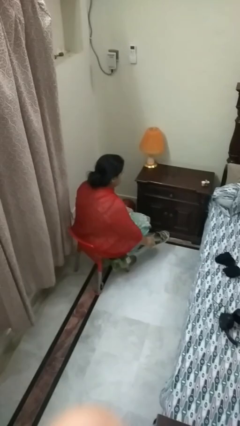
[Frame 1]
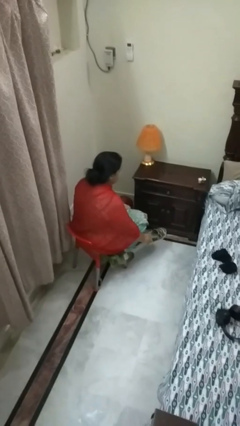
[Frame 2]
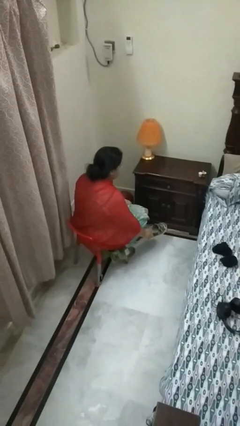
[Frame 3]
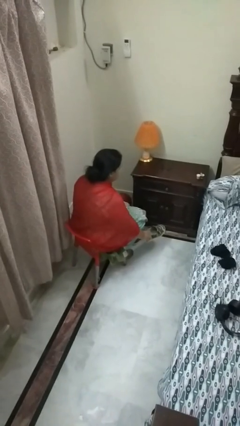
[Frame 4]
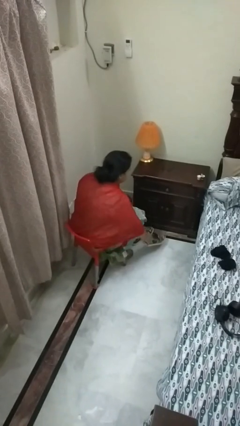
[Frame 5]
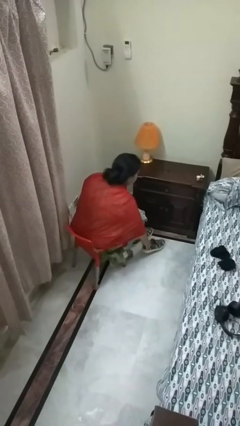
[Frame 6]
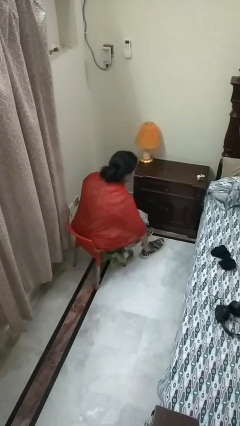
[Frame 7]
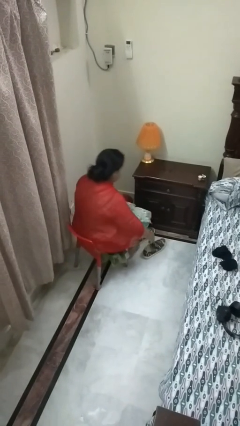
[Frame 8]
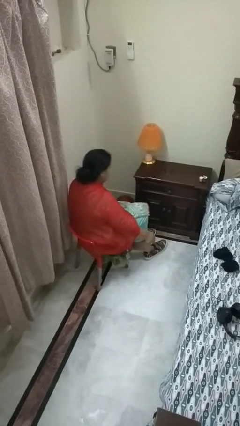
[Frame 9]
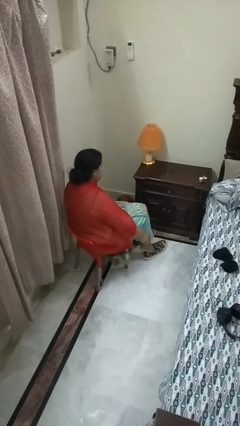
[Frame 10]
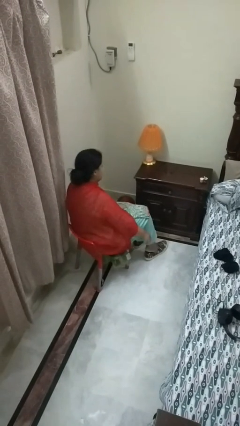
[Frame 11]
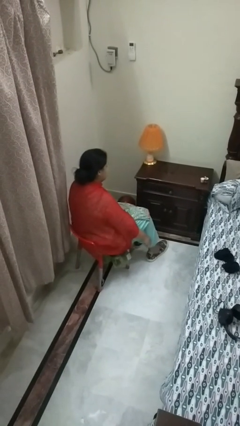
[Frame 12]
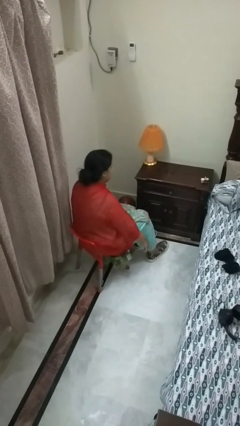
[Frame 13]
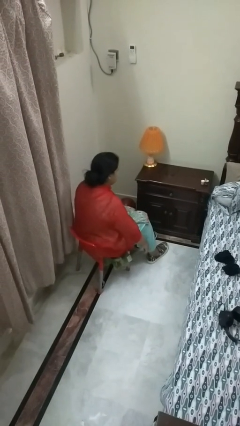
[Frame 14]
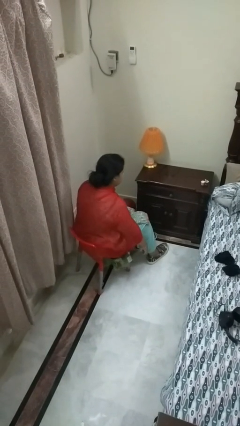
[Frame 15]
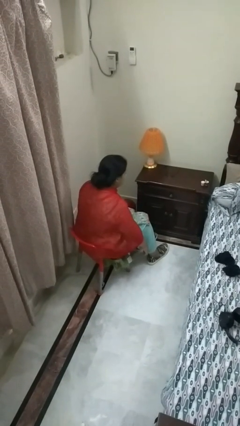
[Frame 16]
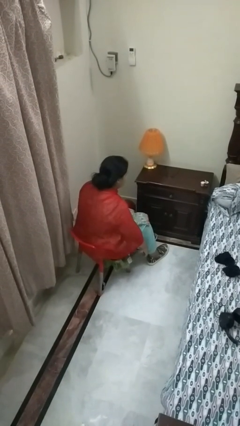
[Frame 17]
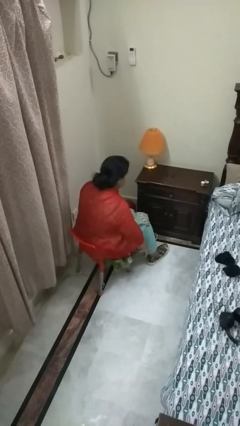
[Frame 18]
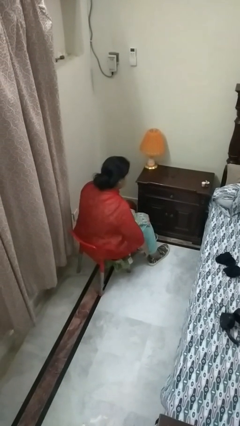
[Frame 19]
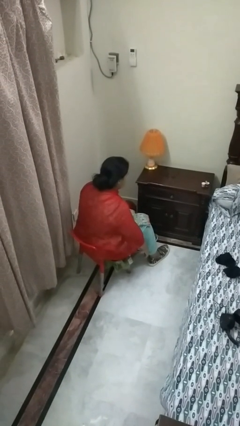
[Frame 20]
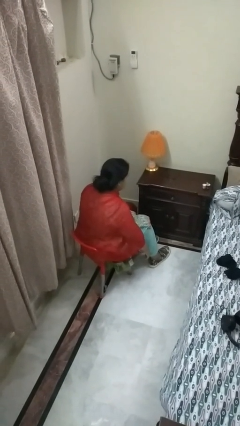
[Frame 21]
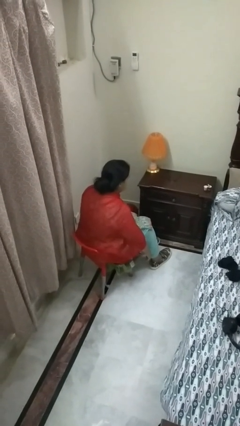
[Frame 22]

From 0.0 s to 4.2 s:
person puts on shoes

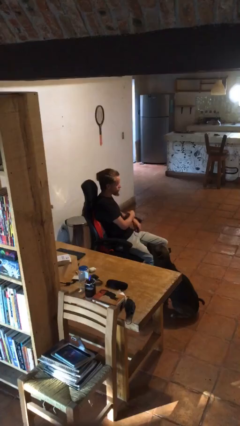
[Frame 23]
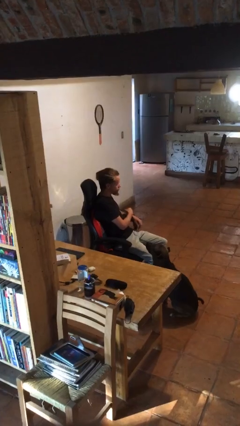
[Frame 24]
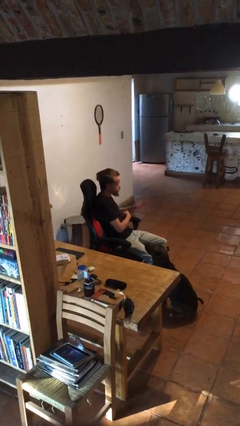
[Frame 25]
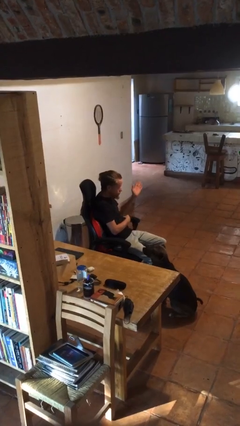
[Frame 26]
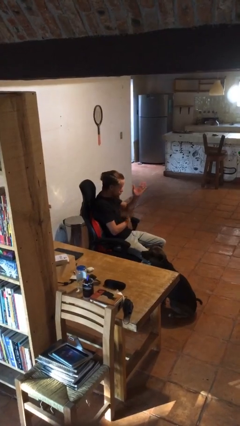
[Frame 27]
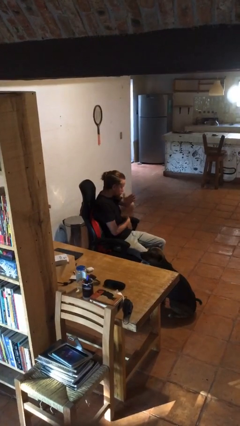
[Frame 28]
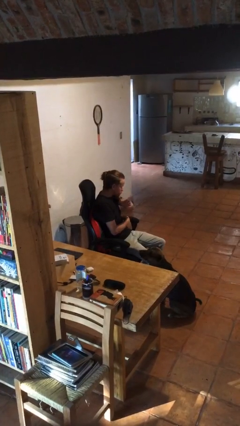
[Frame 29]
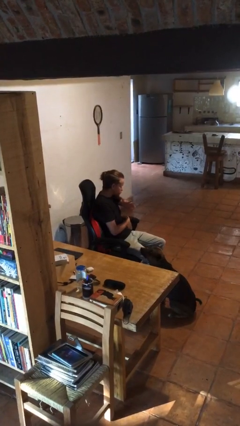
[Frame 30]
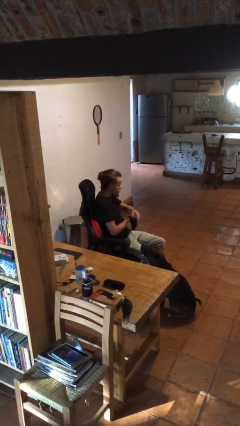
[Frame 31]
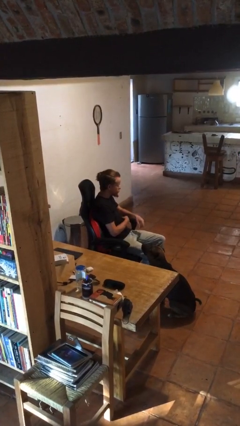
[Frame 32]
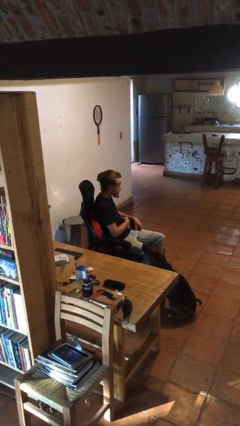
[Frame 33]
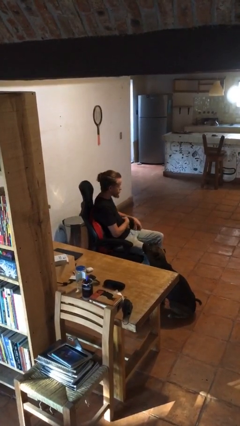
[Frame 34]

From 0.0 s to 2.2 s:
person gestures swipe right

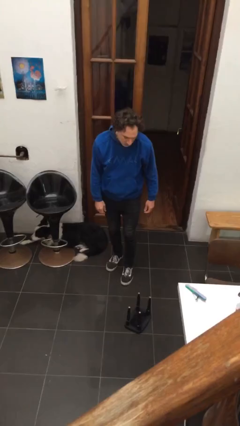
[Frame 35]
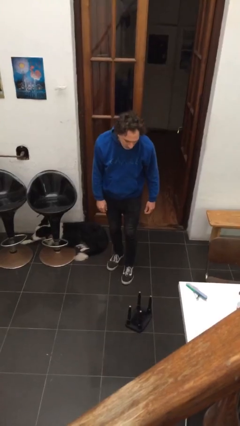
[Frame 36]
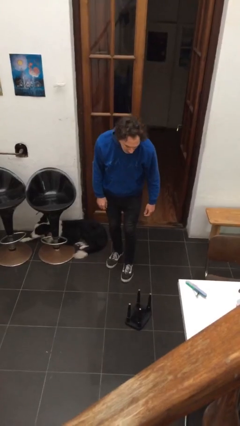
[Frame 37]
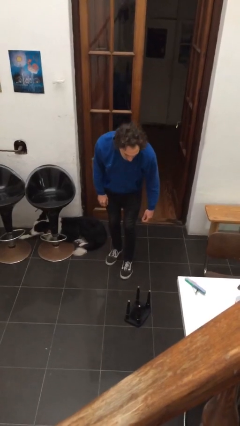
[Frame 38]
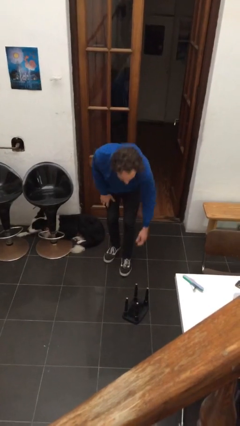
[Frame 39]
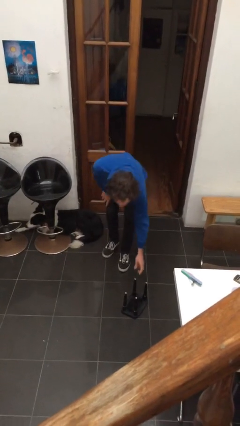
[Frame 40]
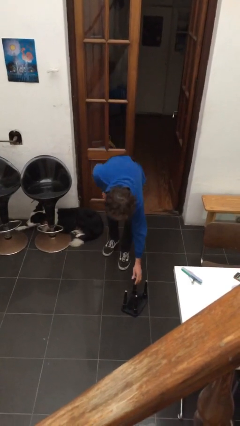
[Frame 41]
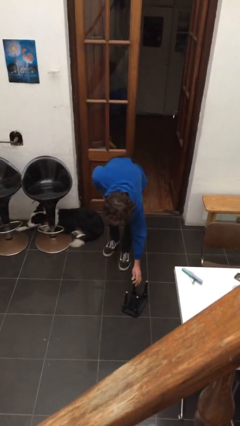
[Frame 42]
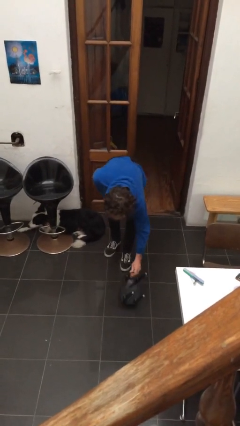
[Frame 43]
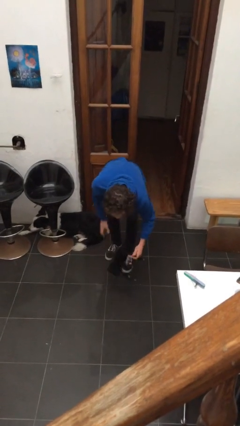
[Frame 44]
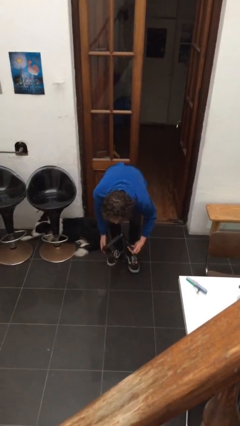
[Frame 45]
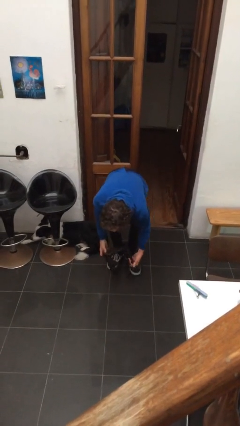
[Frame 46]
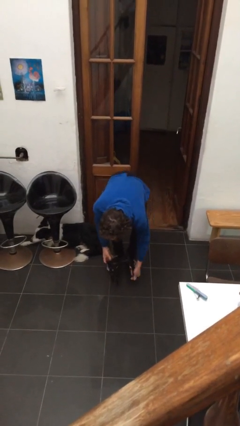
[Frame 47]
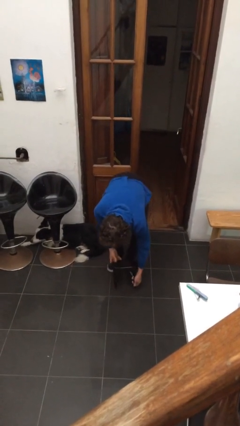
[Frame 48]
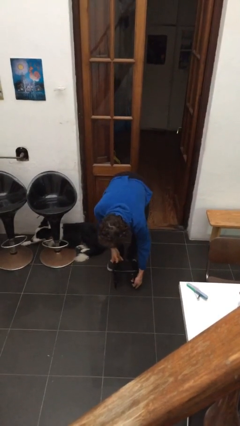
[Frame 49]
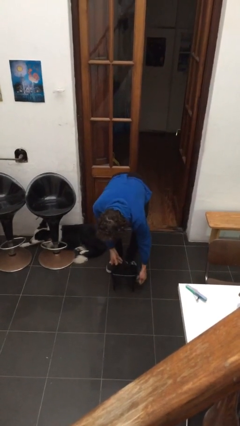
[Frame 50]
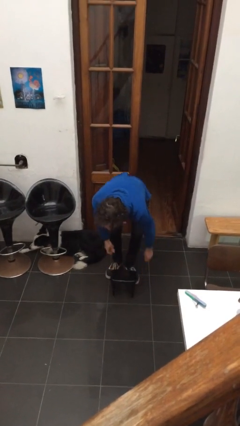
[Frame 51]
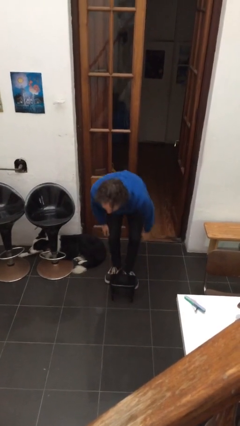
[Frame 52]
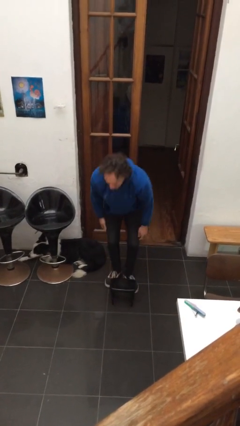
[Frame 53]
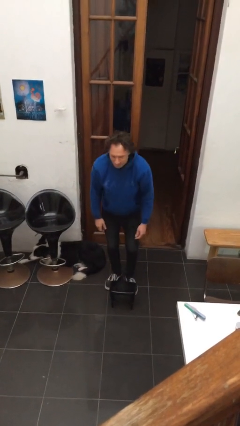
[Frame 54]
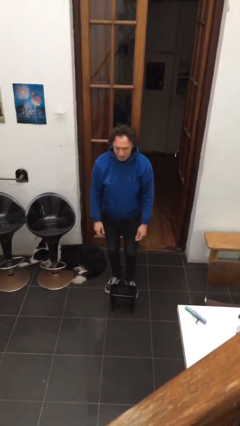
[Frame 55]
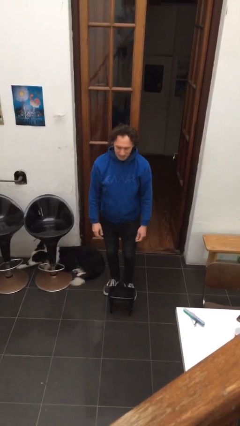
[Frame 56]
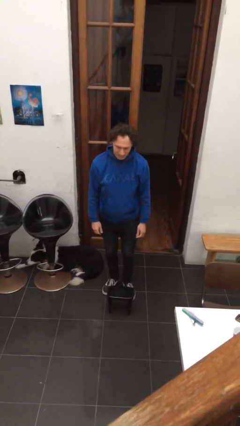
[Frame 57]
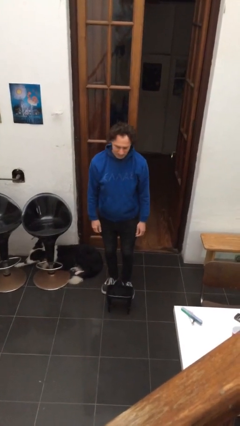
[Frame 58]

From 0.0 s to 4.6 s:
person sets upright furniture

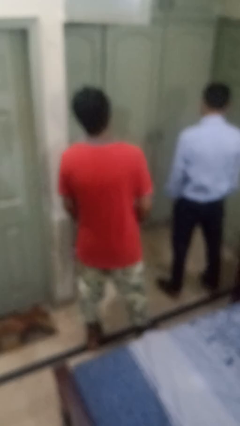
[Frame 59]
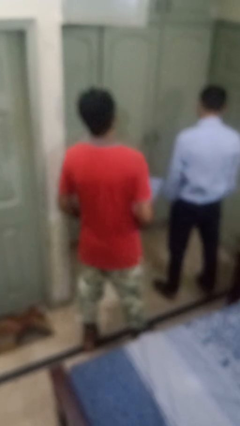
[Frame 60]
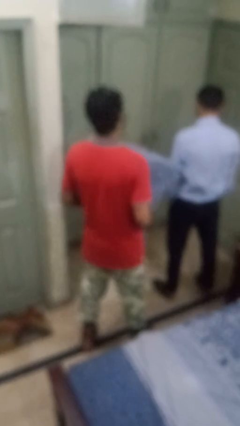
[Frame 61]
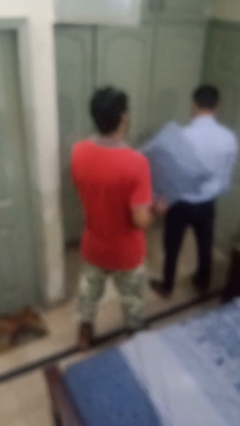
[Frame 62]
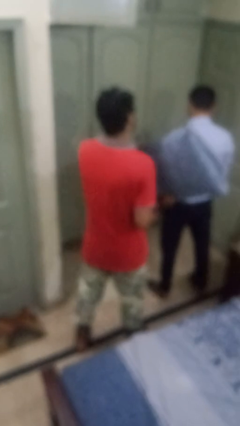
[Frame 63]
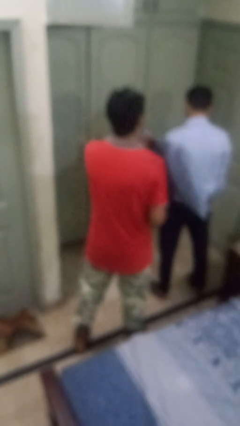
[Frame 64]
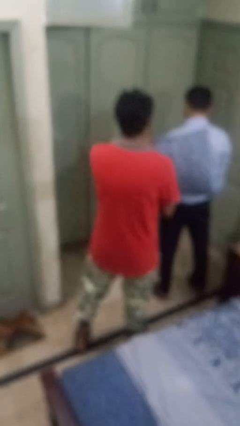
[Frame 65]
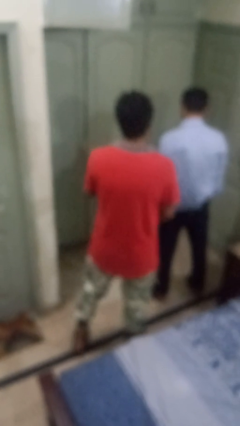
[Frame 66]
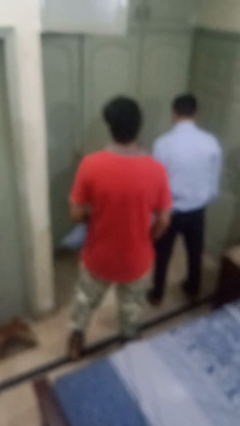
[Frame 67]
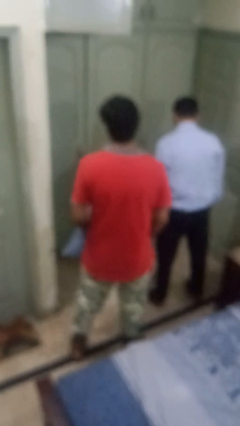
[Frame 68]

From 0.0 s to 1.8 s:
person hits person with pillow

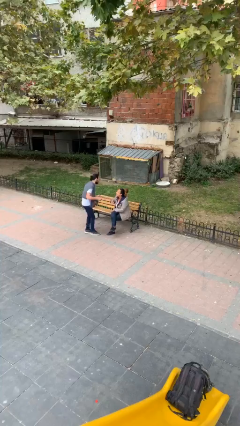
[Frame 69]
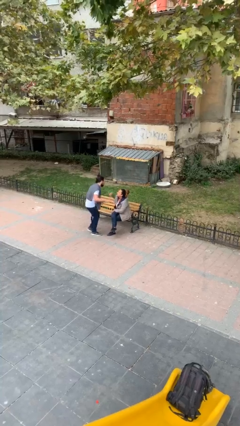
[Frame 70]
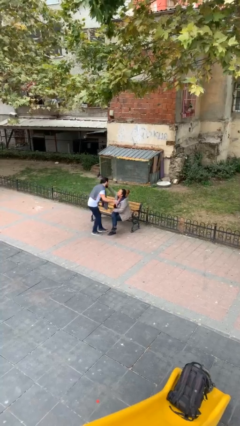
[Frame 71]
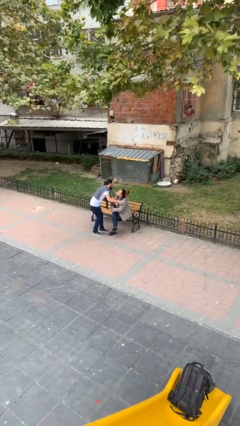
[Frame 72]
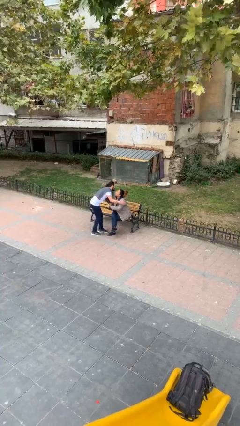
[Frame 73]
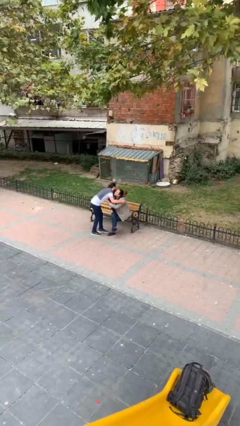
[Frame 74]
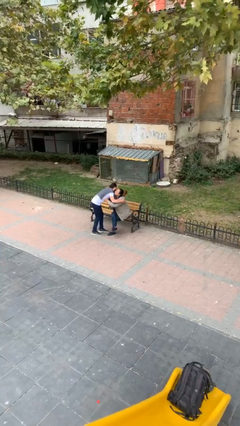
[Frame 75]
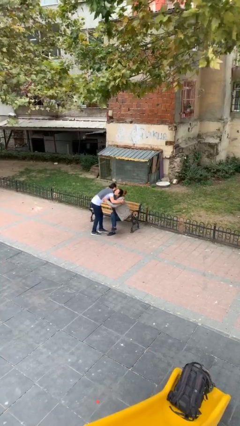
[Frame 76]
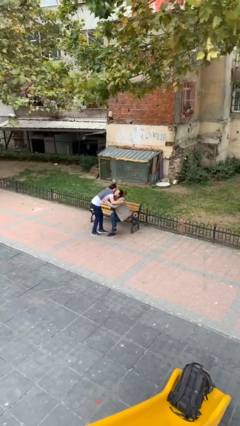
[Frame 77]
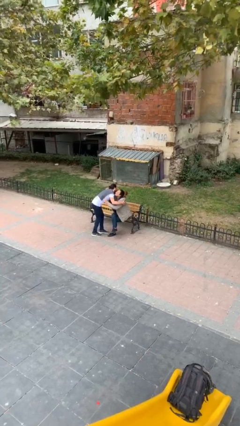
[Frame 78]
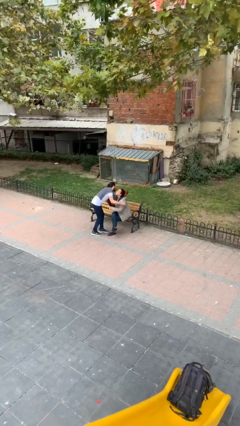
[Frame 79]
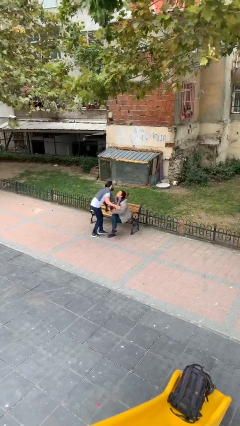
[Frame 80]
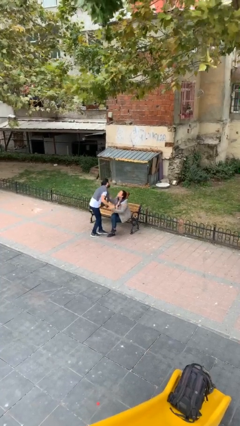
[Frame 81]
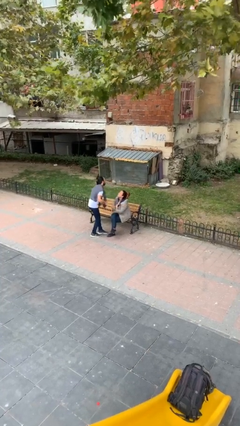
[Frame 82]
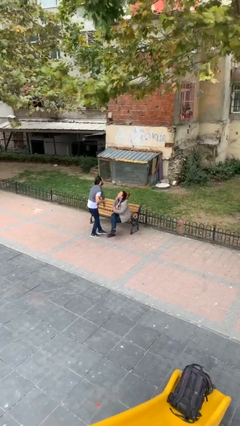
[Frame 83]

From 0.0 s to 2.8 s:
person embraces person

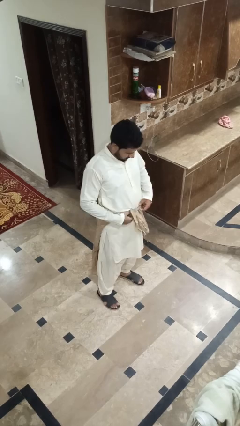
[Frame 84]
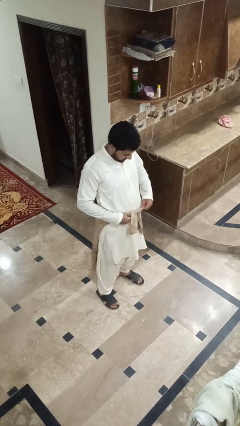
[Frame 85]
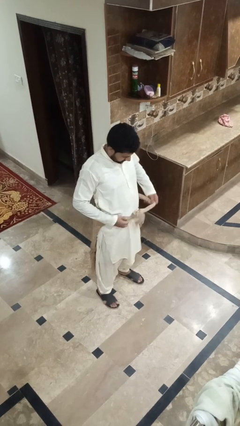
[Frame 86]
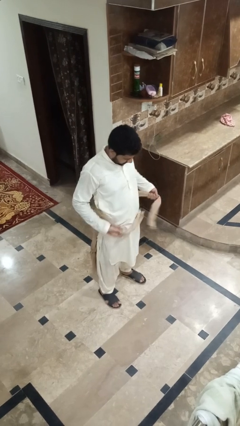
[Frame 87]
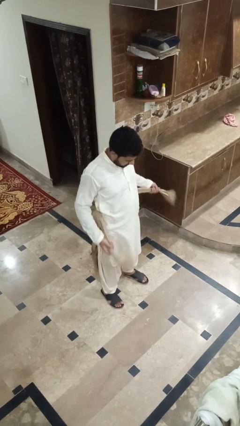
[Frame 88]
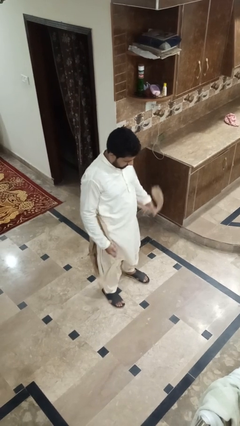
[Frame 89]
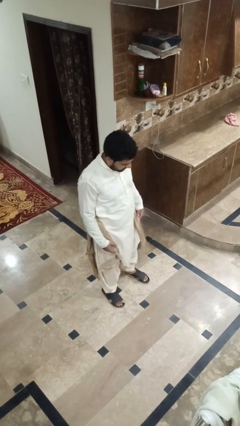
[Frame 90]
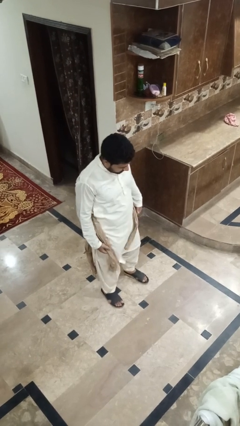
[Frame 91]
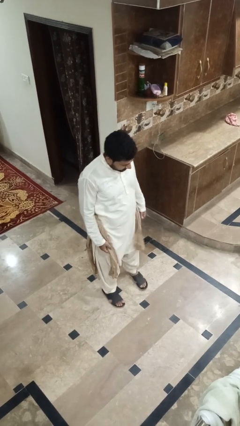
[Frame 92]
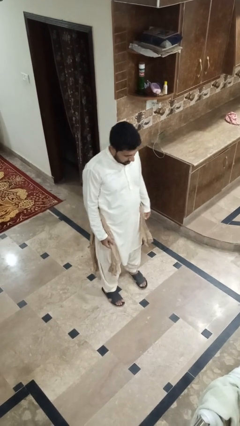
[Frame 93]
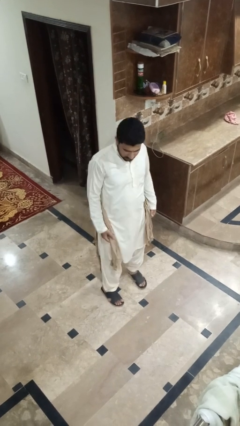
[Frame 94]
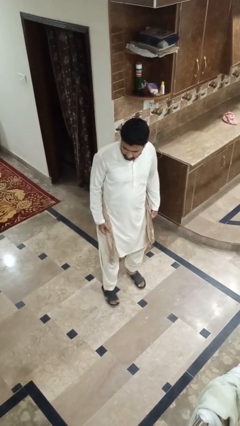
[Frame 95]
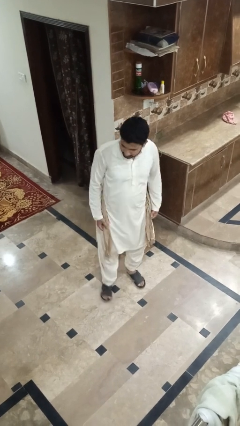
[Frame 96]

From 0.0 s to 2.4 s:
person unties jacket around waist
